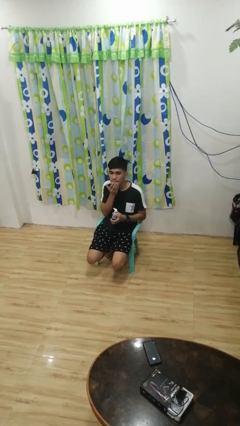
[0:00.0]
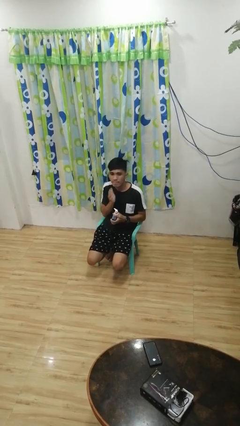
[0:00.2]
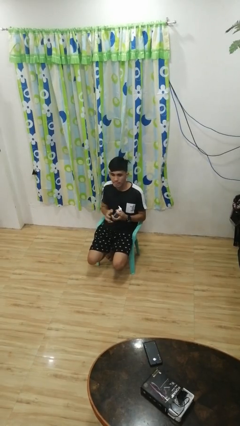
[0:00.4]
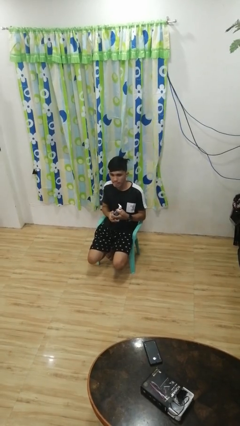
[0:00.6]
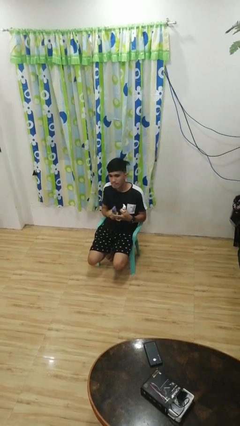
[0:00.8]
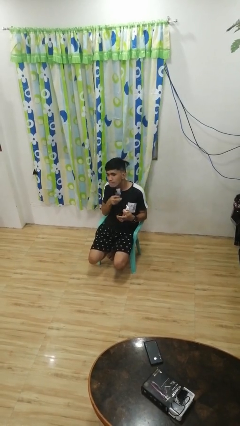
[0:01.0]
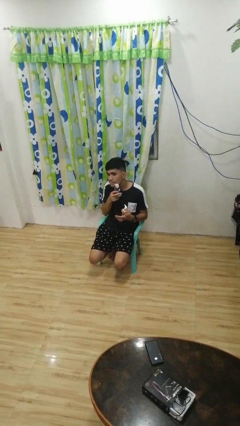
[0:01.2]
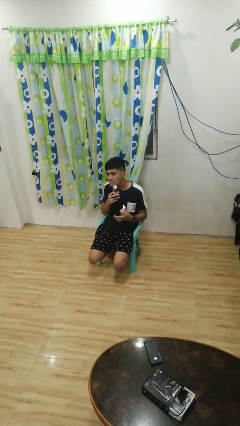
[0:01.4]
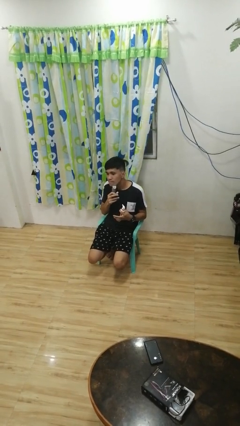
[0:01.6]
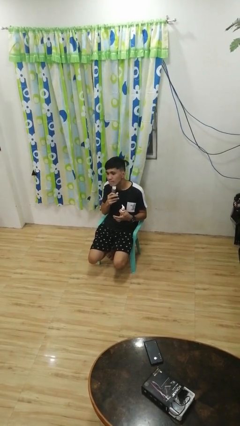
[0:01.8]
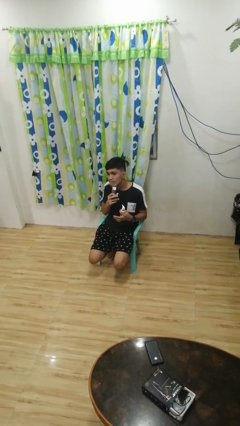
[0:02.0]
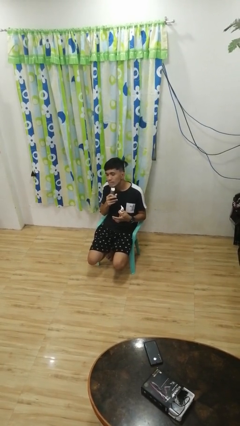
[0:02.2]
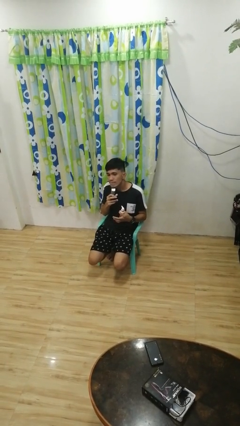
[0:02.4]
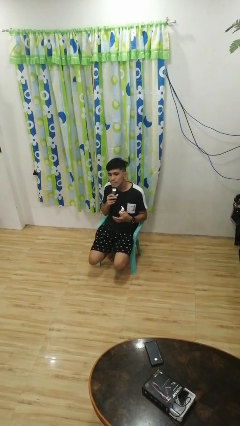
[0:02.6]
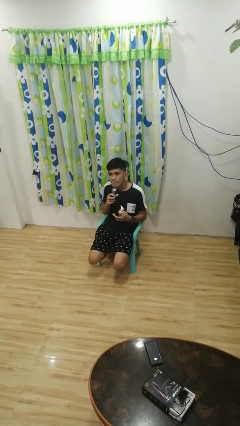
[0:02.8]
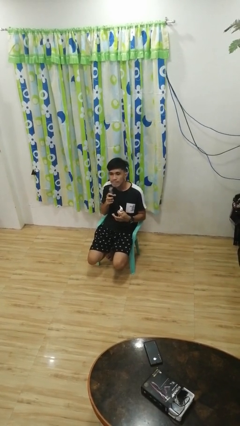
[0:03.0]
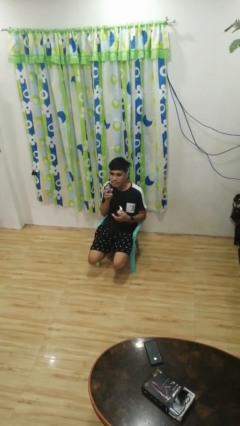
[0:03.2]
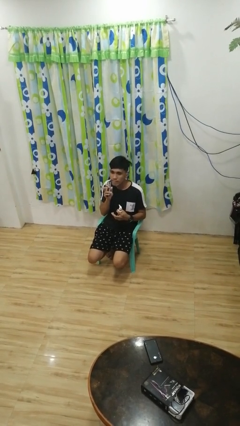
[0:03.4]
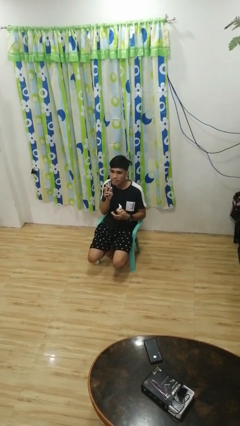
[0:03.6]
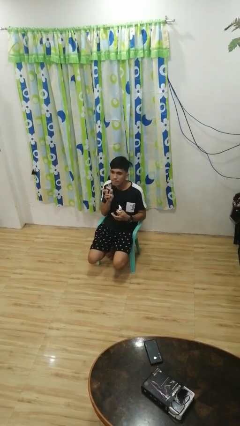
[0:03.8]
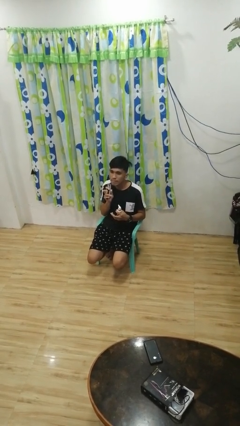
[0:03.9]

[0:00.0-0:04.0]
person shaves face

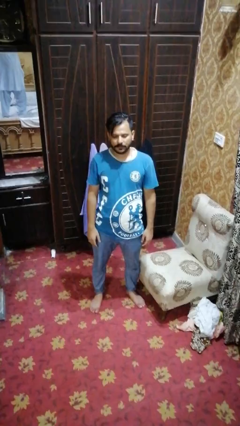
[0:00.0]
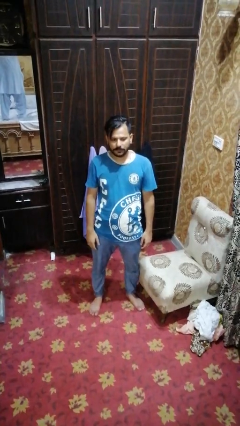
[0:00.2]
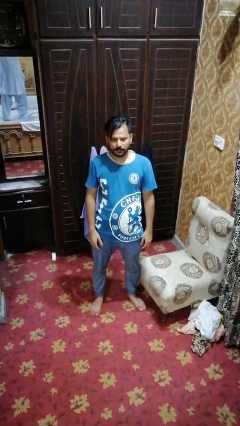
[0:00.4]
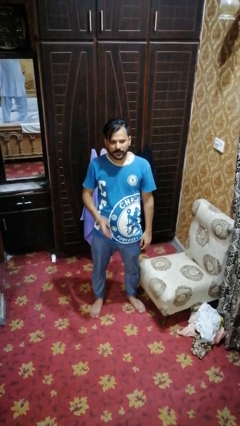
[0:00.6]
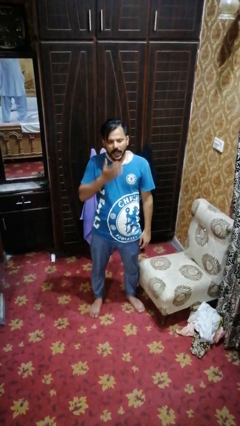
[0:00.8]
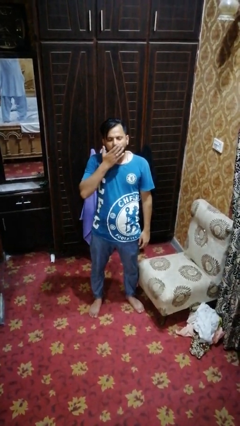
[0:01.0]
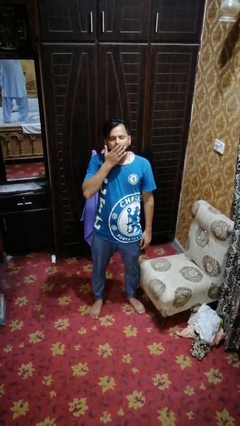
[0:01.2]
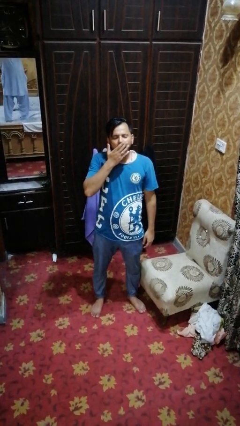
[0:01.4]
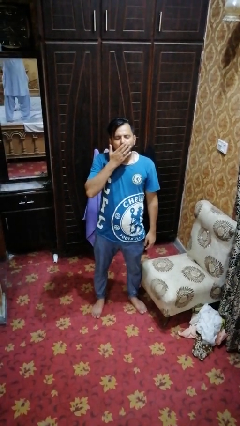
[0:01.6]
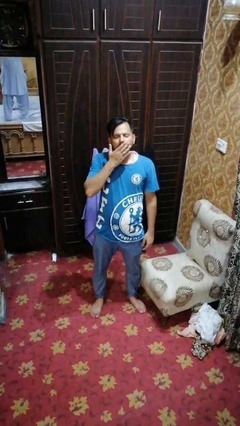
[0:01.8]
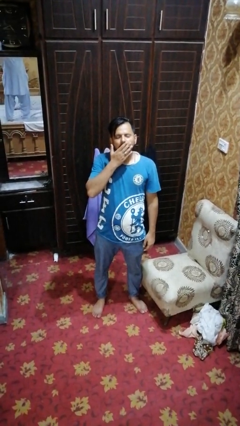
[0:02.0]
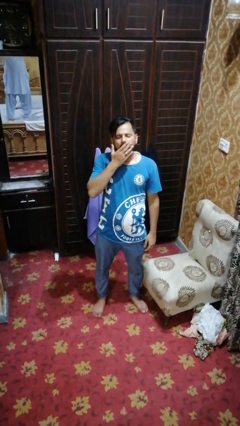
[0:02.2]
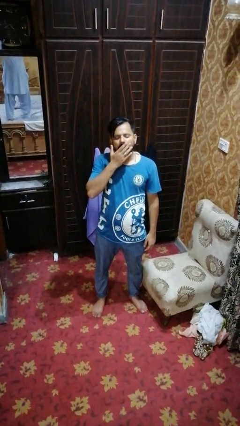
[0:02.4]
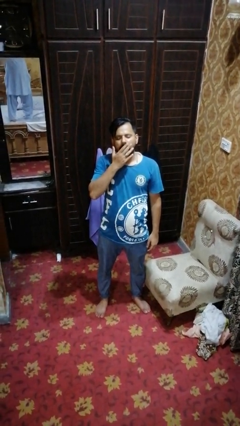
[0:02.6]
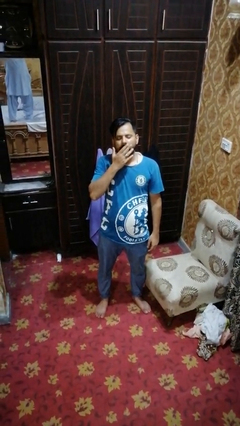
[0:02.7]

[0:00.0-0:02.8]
person yawns

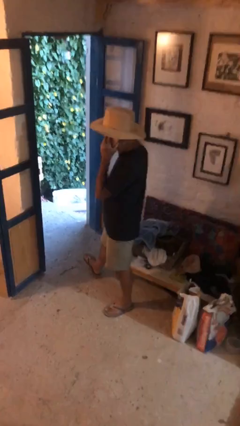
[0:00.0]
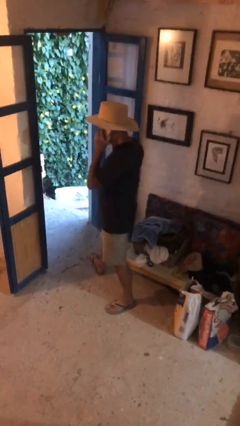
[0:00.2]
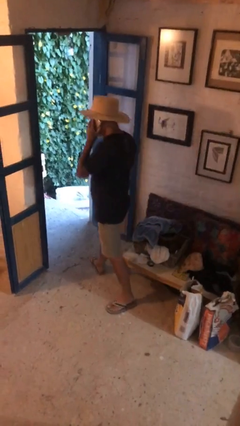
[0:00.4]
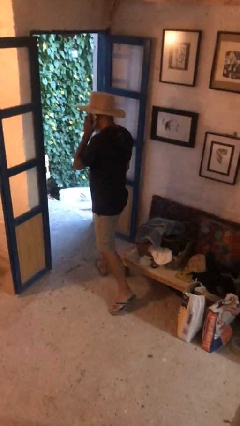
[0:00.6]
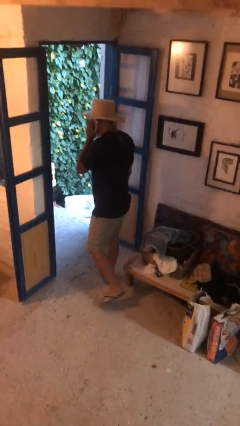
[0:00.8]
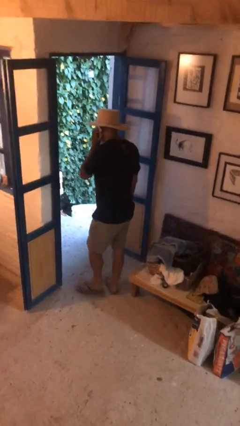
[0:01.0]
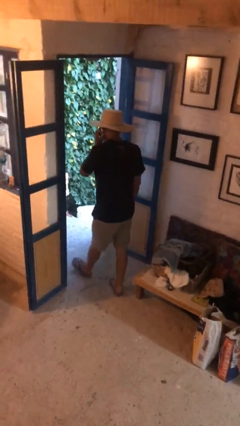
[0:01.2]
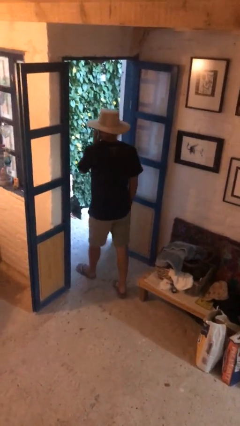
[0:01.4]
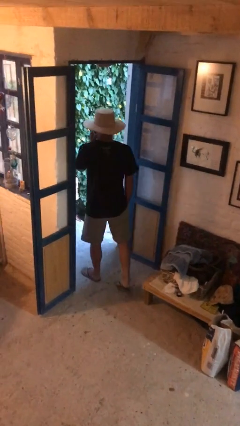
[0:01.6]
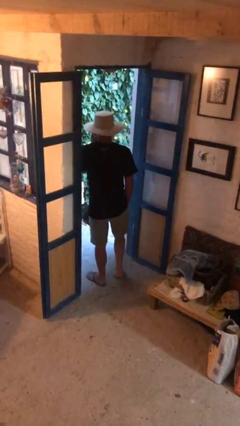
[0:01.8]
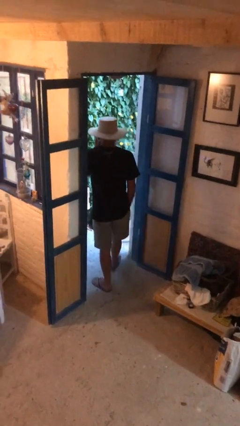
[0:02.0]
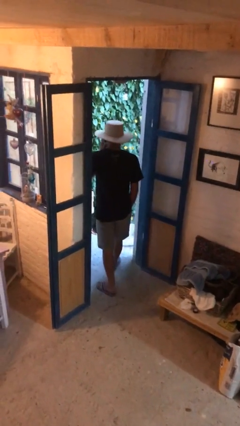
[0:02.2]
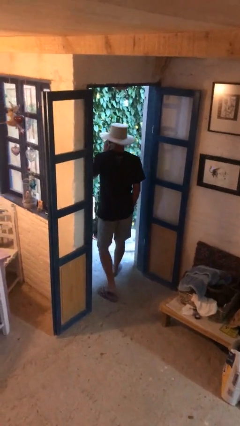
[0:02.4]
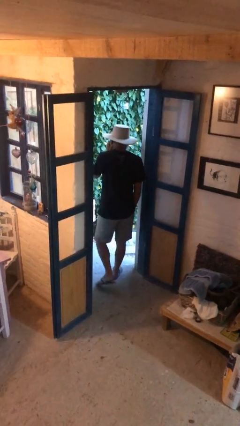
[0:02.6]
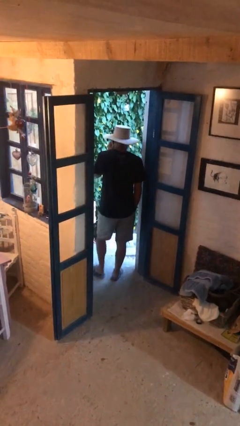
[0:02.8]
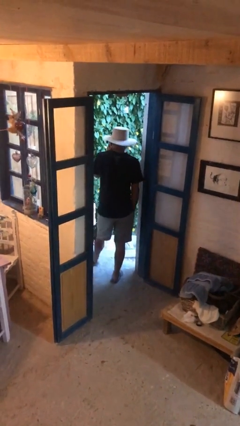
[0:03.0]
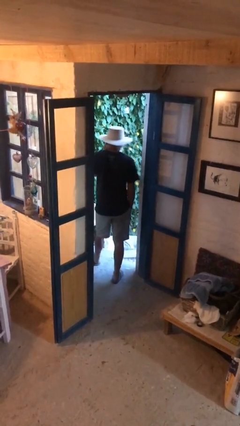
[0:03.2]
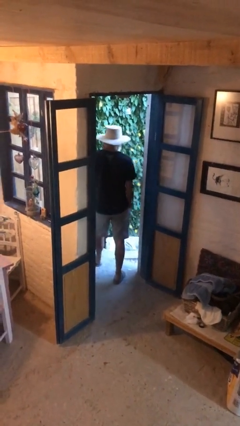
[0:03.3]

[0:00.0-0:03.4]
person exits scene through structure

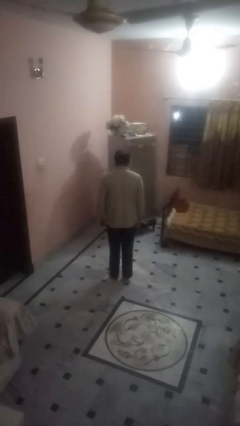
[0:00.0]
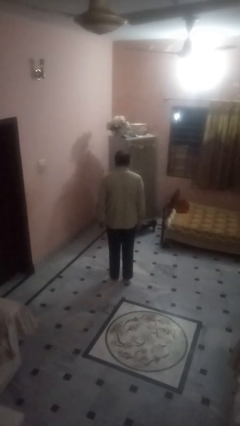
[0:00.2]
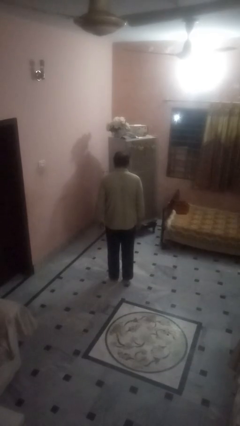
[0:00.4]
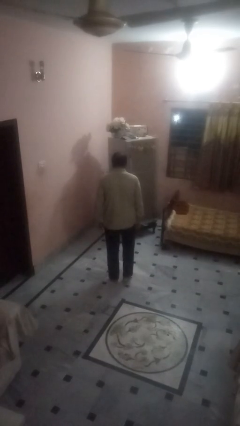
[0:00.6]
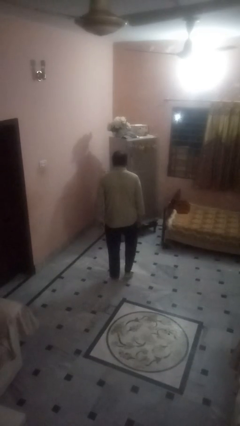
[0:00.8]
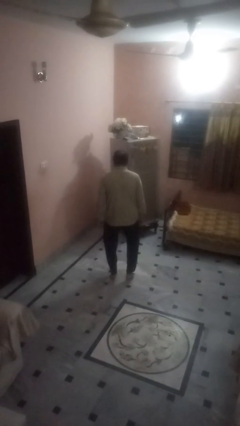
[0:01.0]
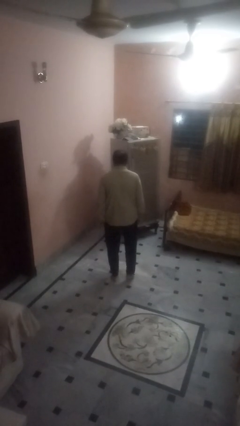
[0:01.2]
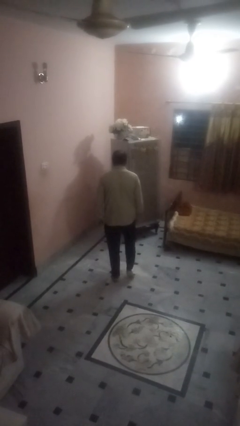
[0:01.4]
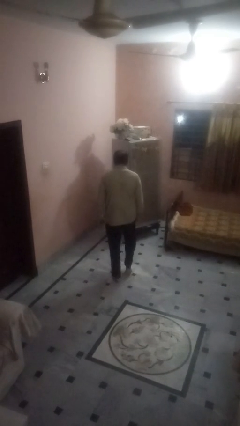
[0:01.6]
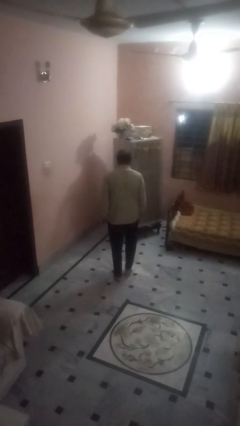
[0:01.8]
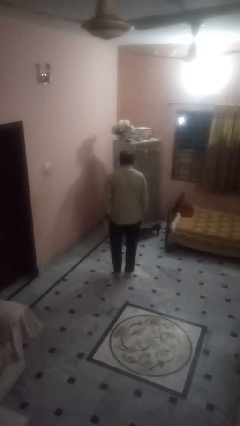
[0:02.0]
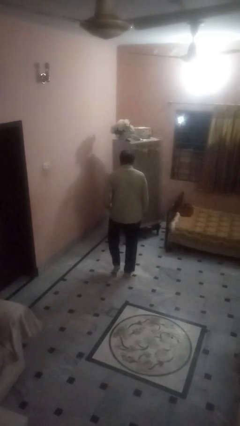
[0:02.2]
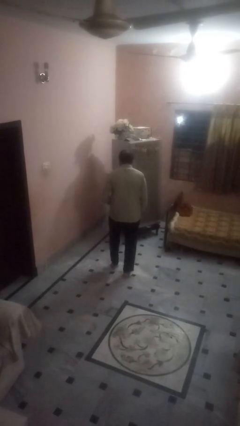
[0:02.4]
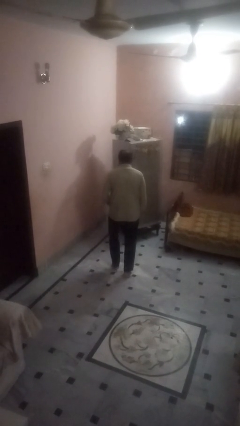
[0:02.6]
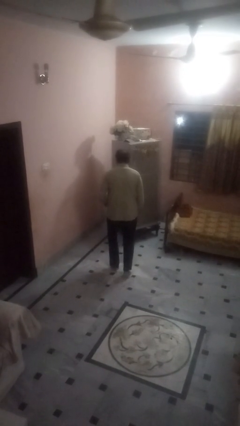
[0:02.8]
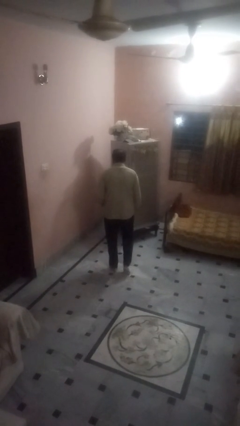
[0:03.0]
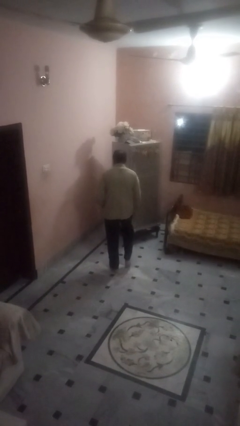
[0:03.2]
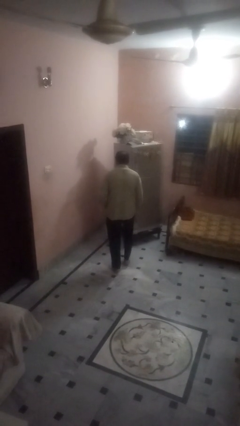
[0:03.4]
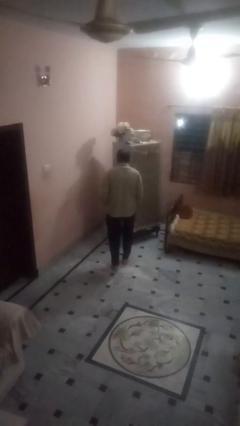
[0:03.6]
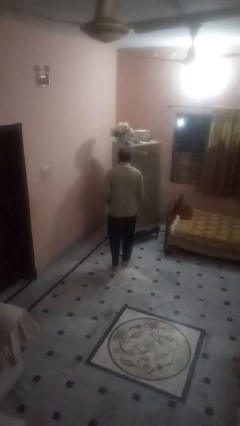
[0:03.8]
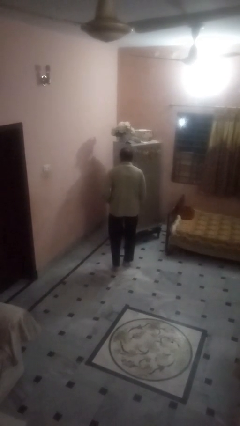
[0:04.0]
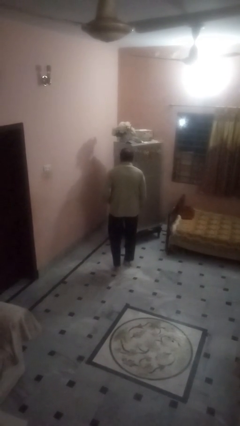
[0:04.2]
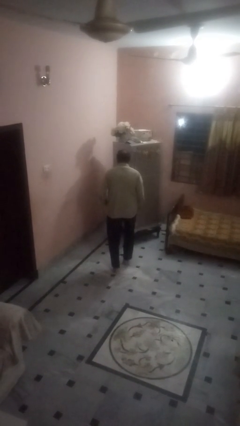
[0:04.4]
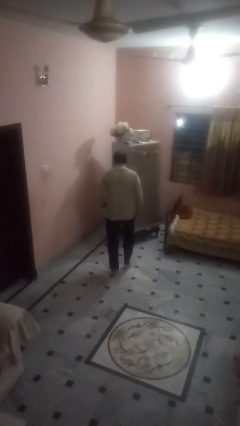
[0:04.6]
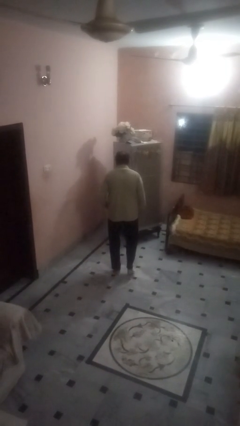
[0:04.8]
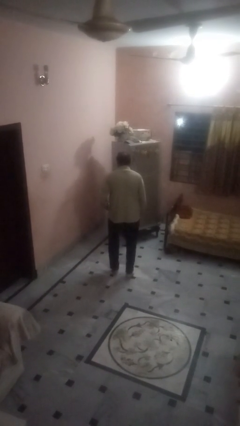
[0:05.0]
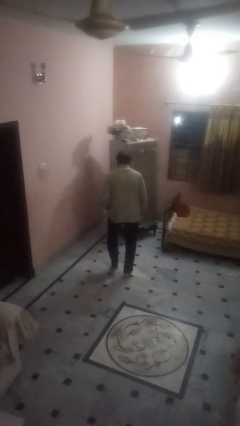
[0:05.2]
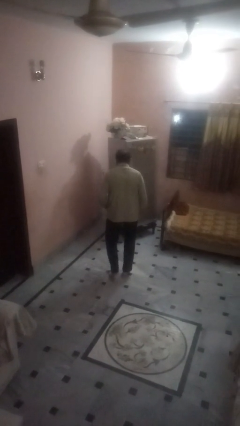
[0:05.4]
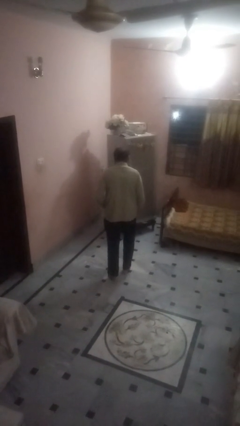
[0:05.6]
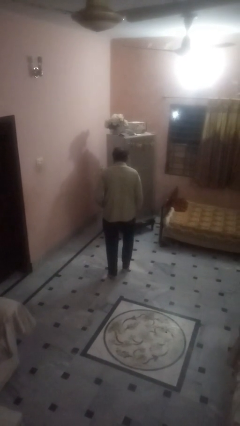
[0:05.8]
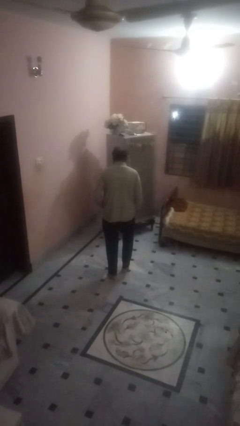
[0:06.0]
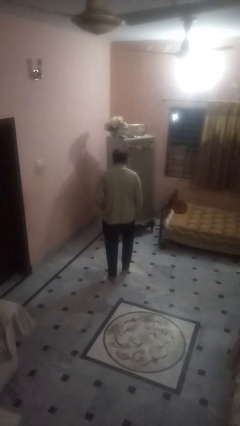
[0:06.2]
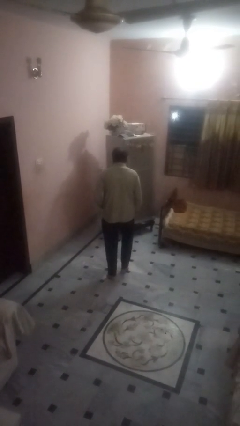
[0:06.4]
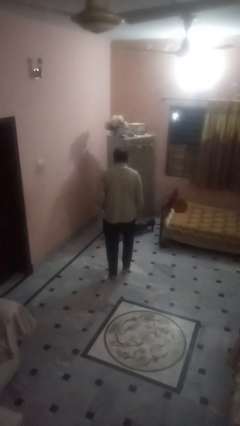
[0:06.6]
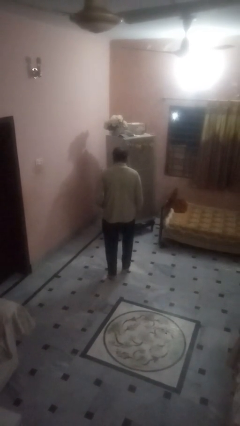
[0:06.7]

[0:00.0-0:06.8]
person walks tiptoe

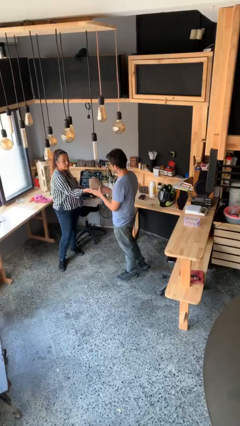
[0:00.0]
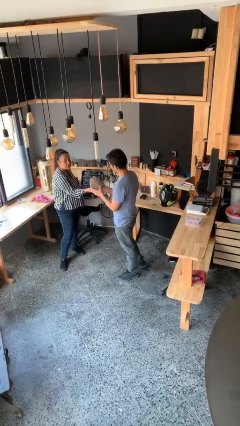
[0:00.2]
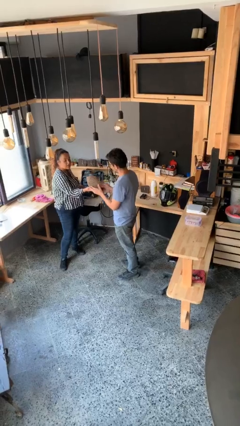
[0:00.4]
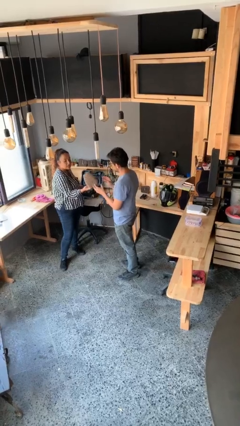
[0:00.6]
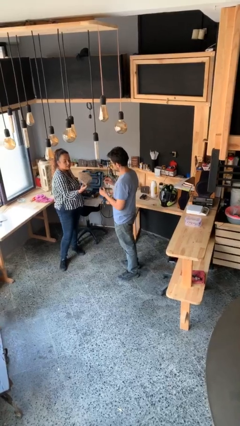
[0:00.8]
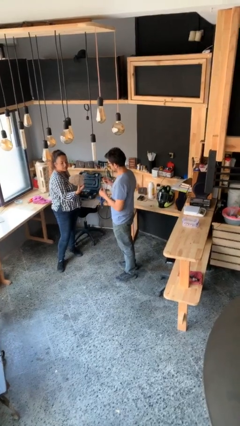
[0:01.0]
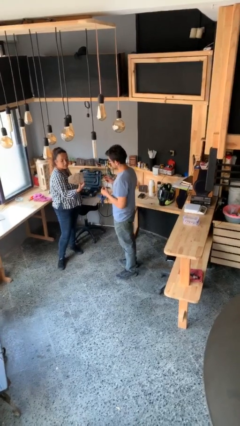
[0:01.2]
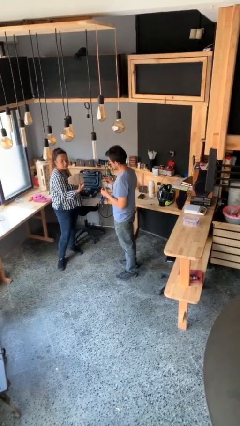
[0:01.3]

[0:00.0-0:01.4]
person transfers object to person
